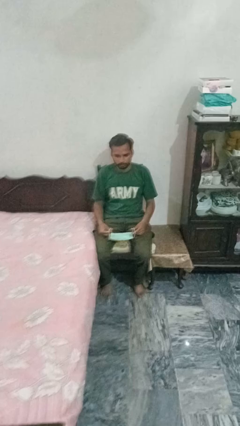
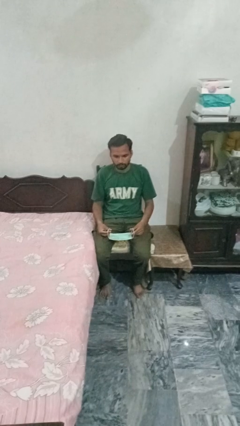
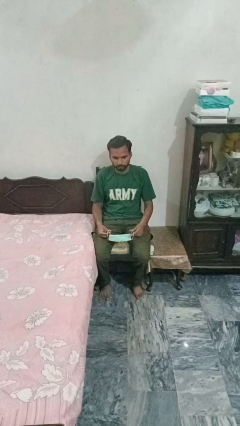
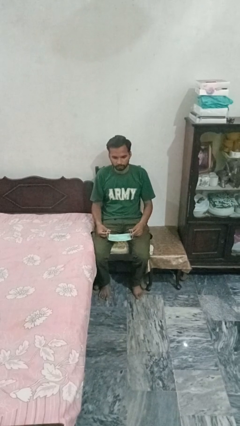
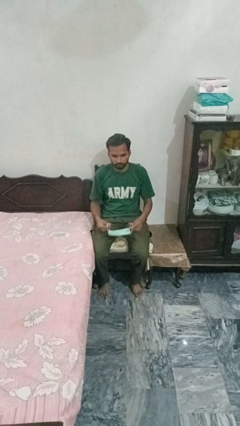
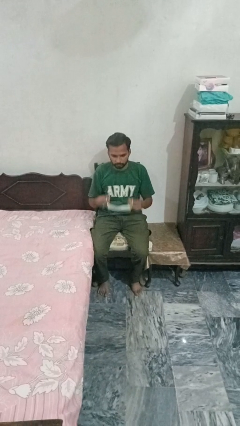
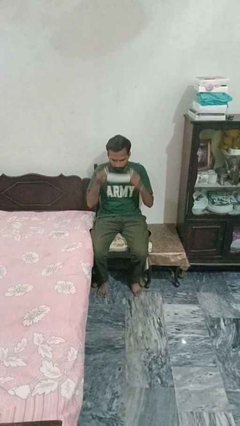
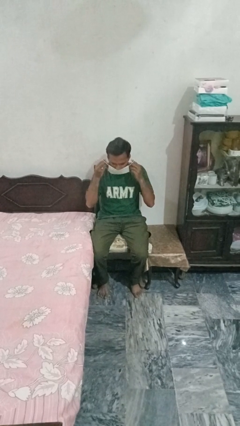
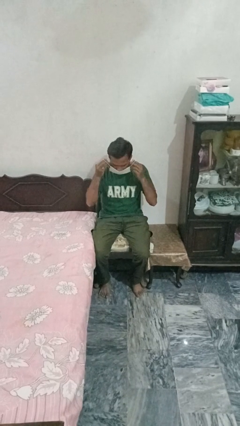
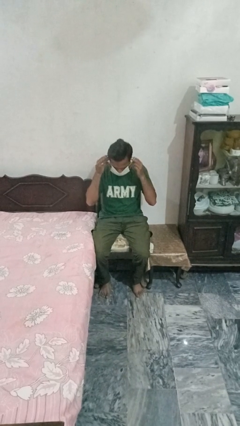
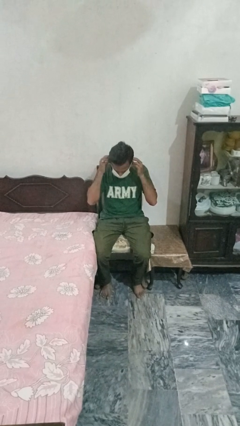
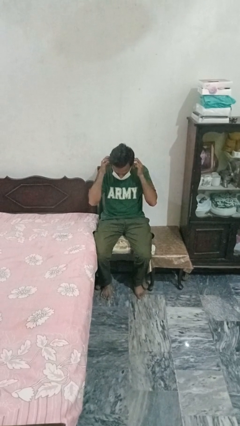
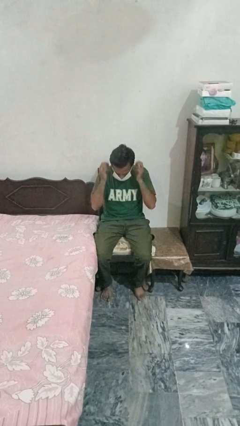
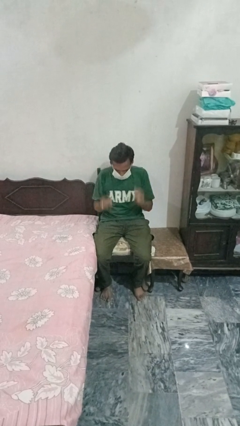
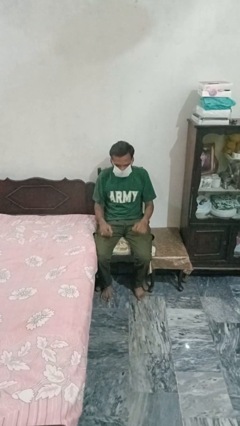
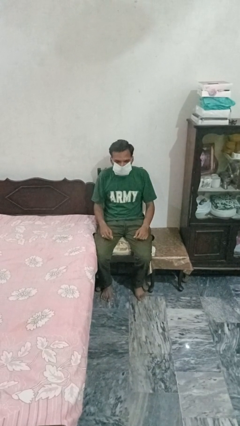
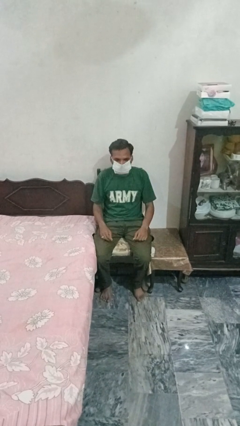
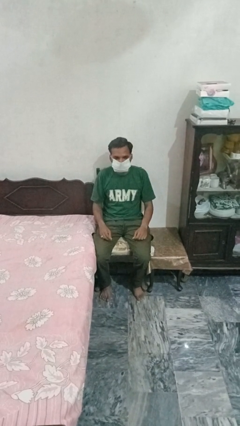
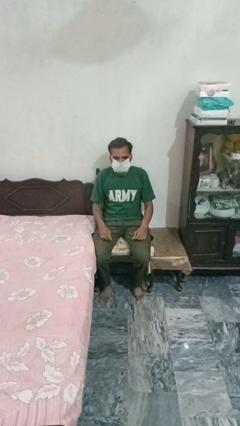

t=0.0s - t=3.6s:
person puts on facemask

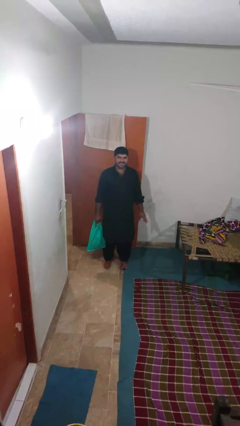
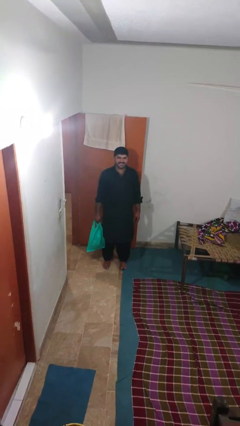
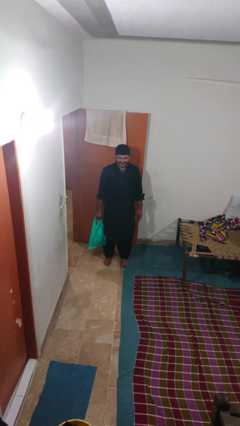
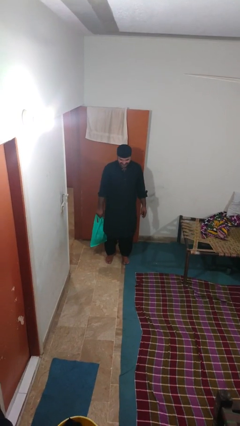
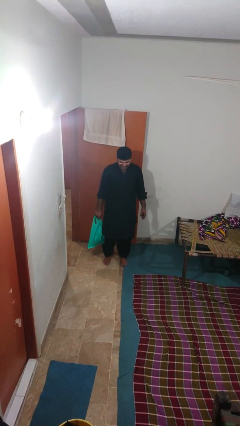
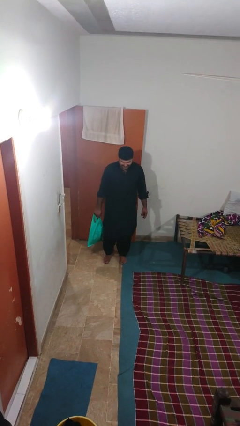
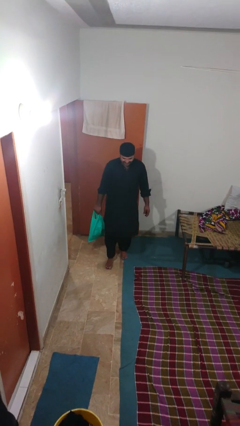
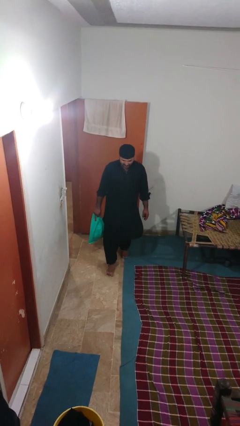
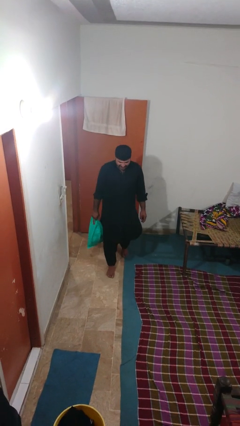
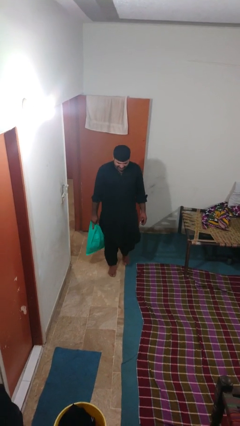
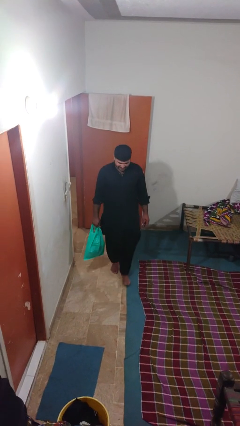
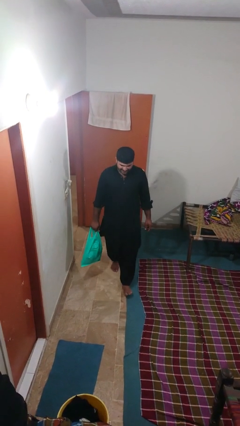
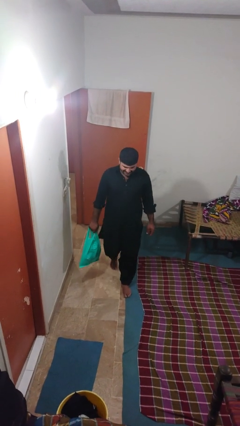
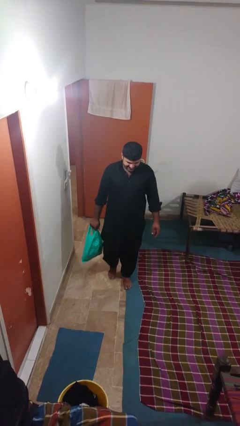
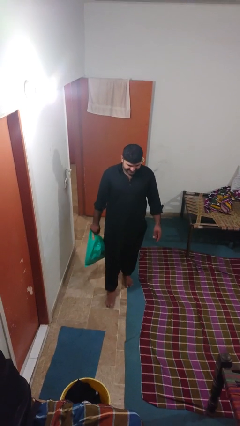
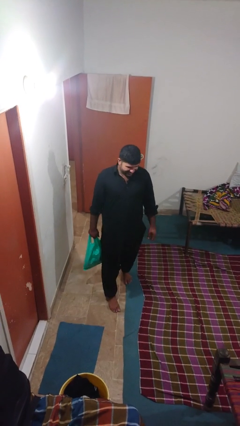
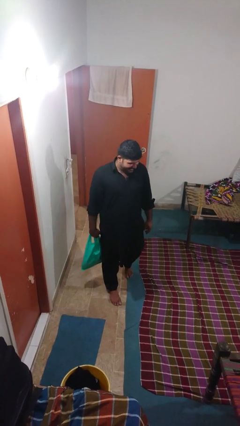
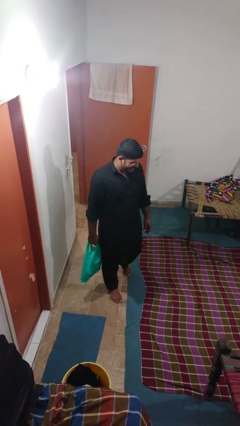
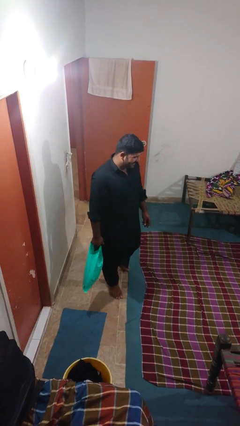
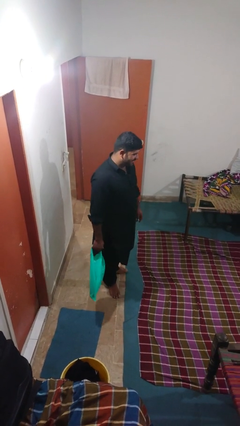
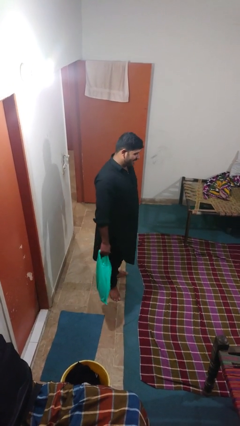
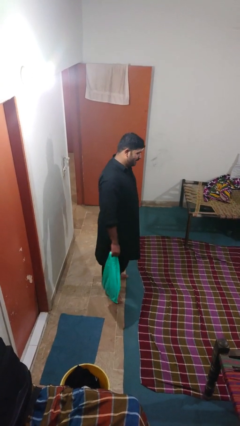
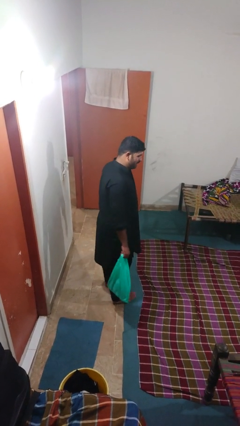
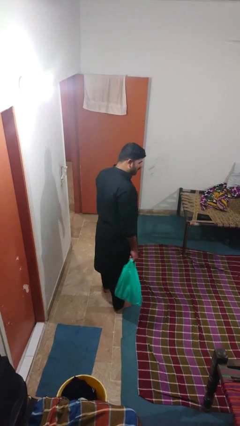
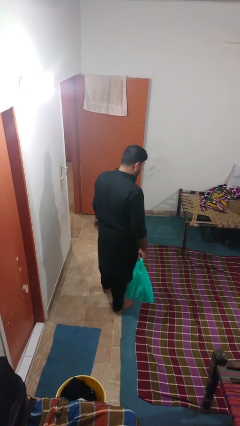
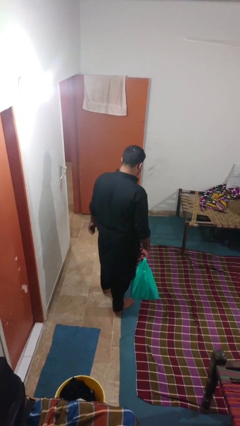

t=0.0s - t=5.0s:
person carries groceries

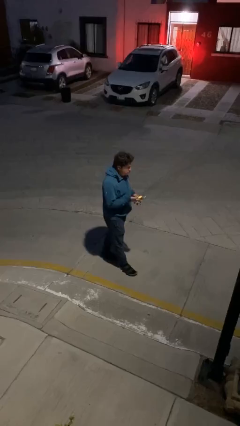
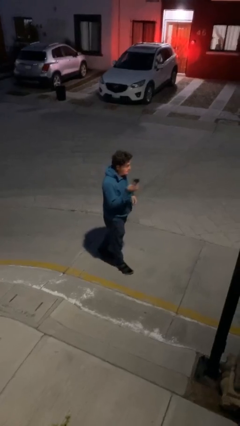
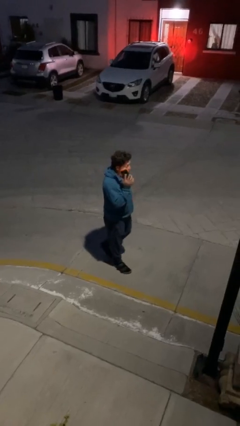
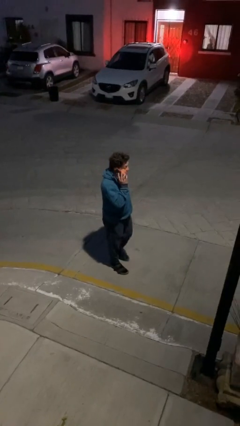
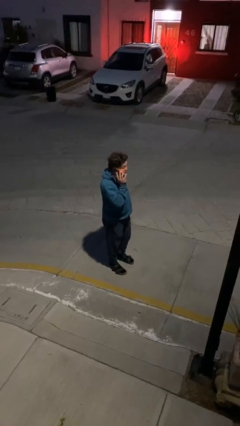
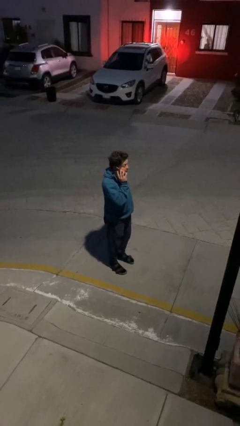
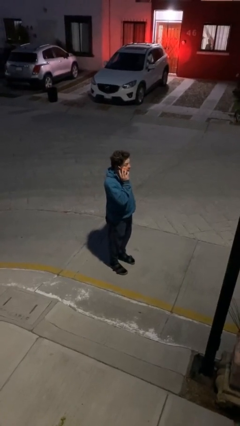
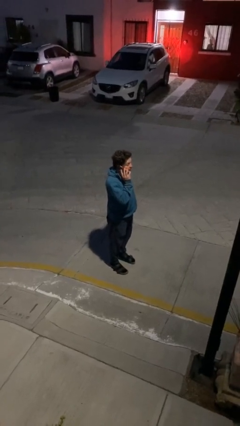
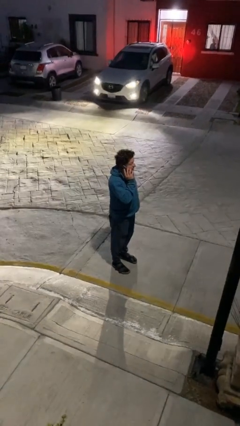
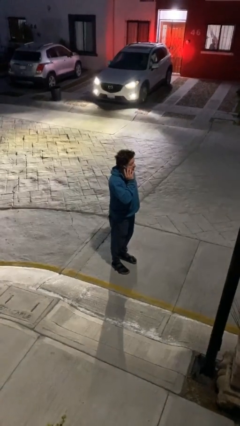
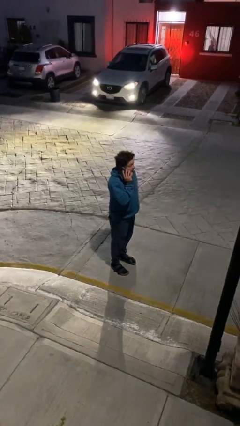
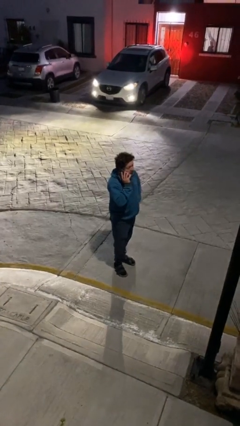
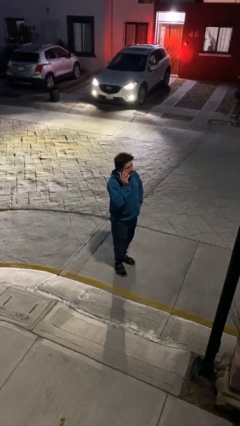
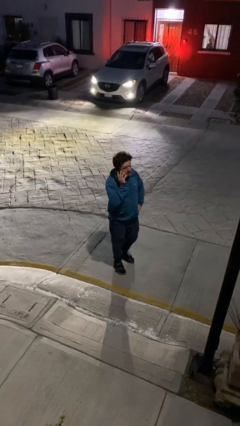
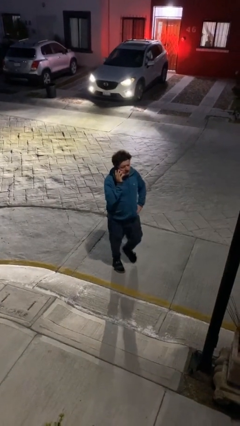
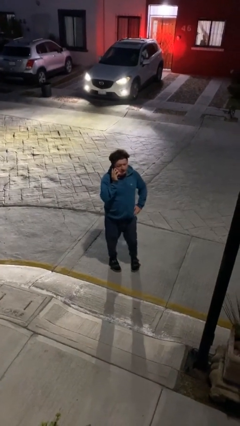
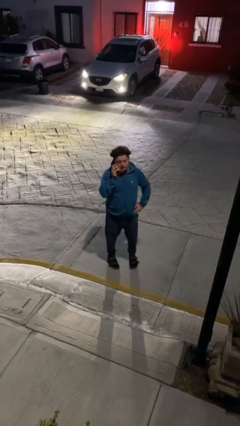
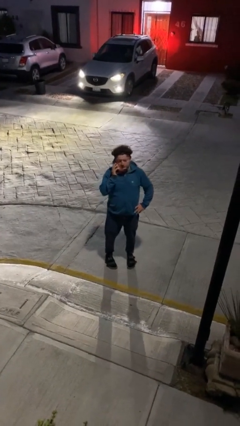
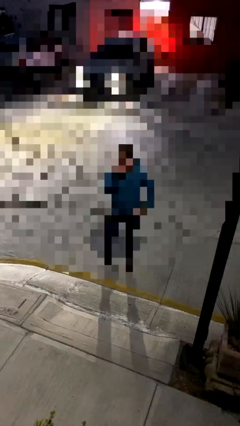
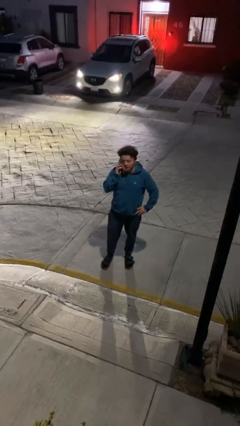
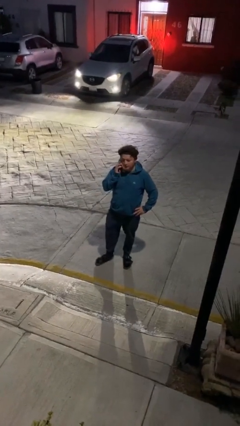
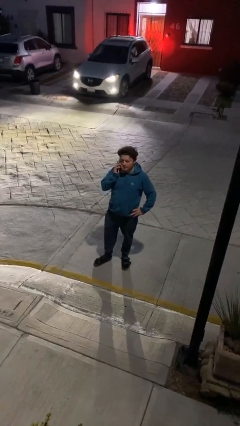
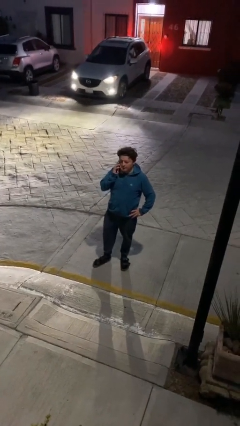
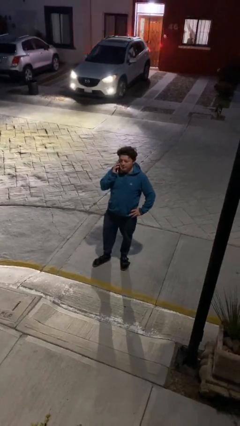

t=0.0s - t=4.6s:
person talks on phone

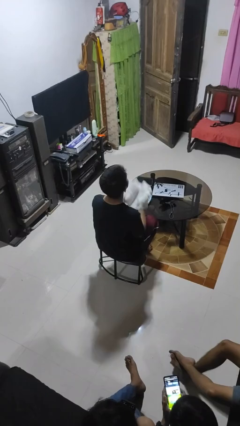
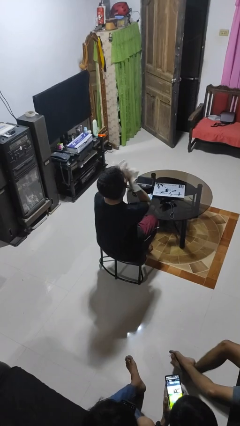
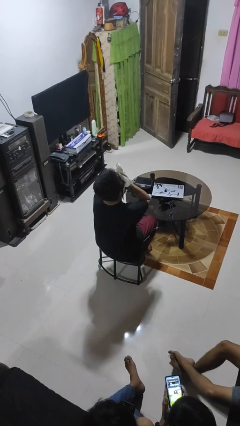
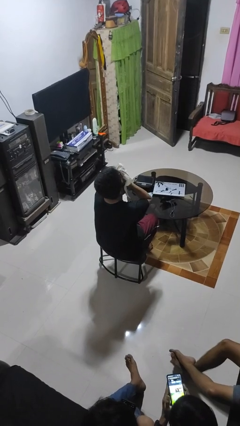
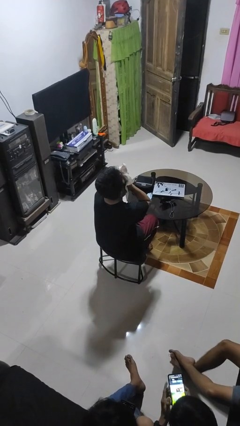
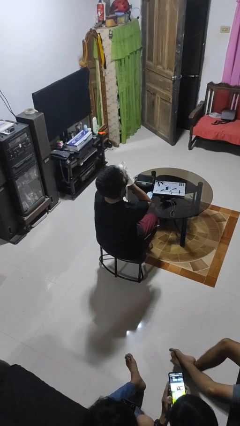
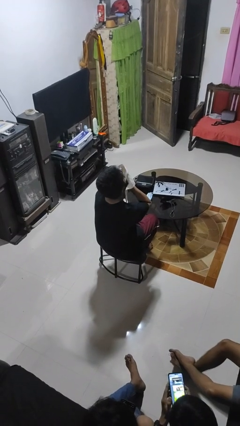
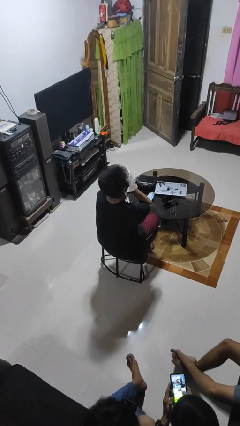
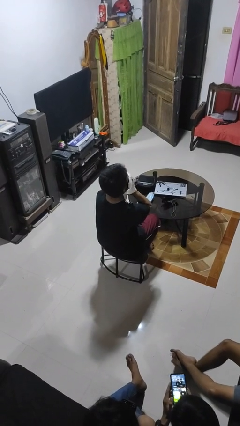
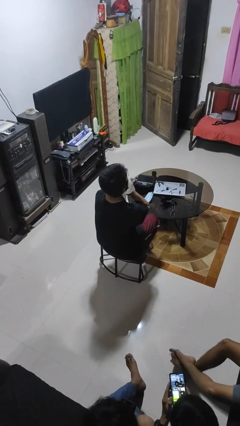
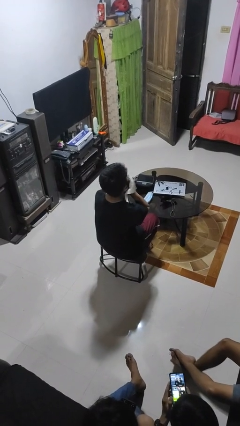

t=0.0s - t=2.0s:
person wipes mouth with napkin

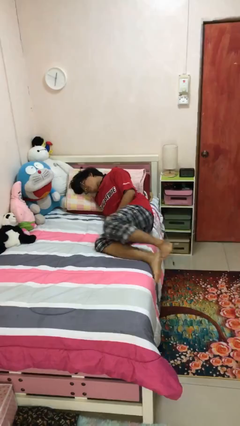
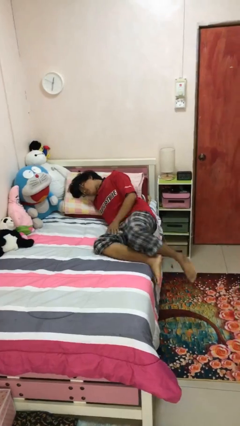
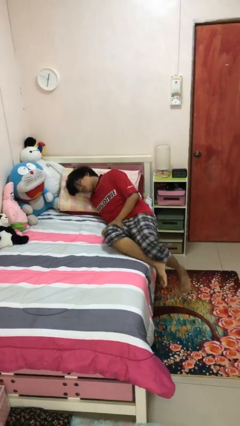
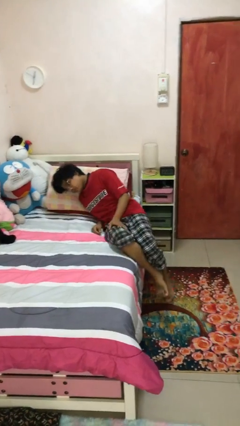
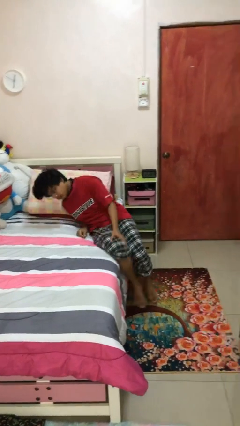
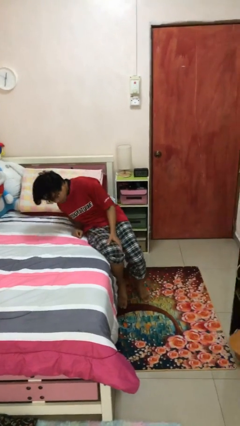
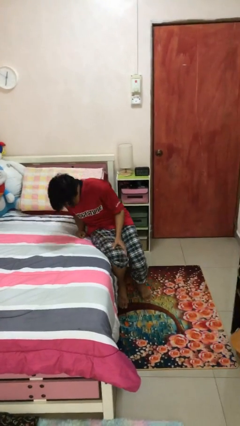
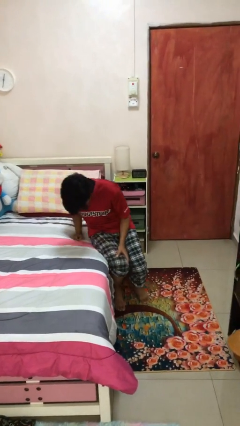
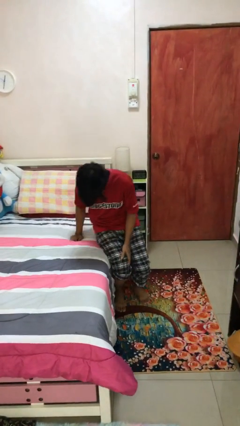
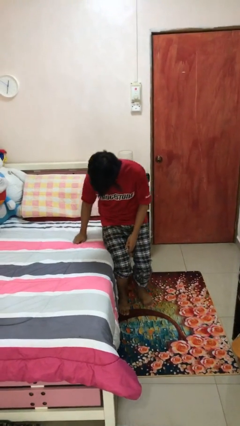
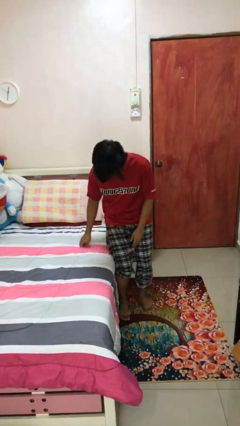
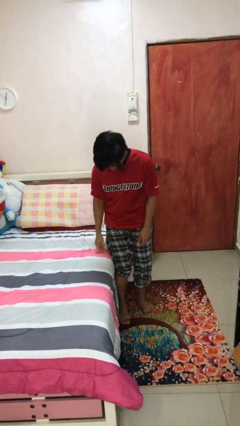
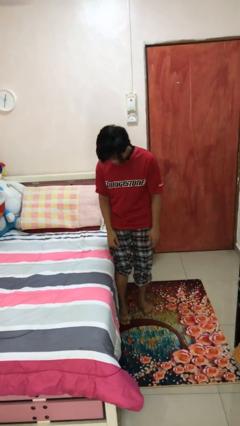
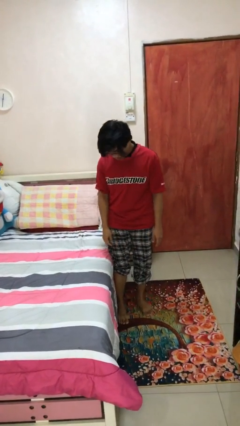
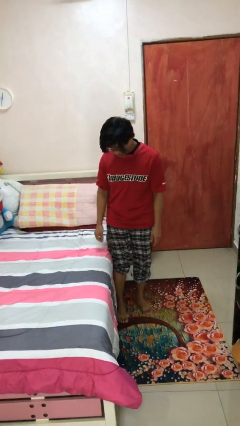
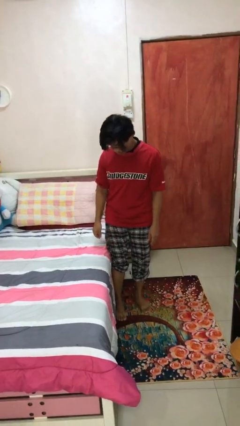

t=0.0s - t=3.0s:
person stands up
